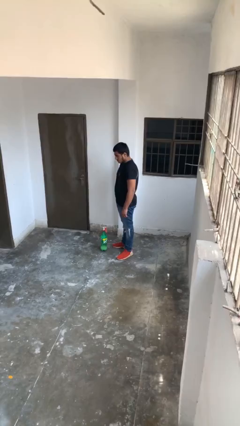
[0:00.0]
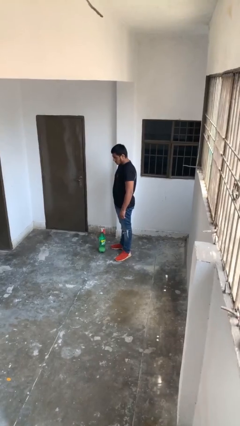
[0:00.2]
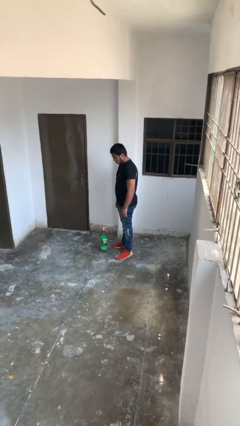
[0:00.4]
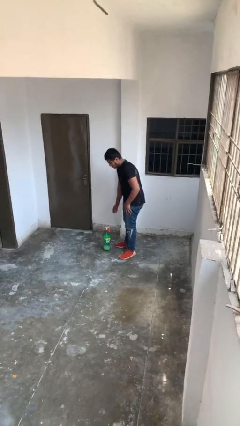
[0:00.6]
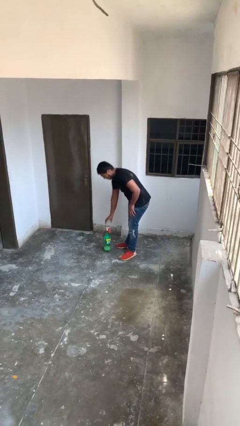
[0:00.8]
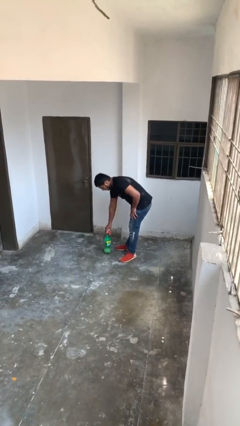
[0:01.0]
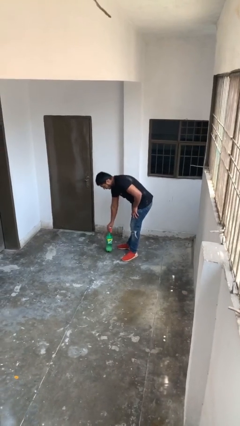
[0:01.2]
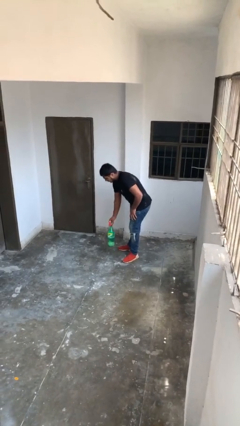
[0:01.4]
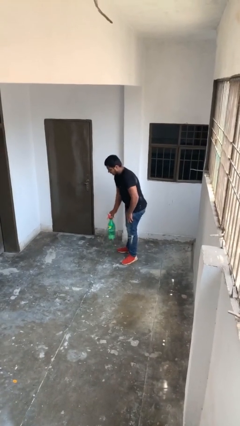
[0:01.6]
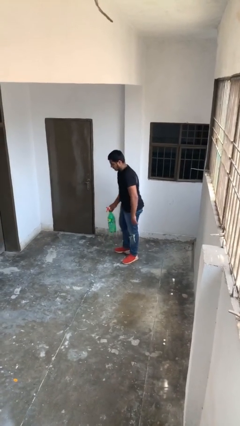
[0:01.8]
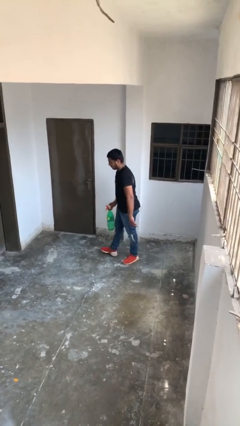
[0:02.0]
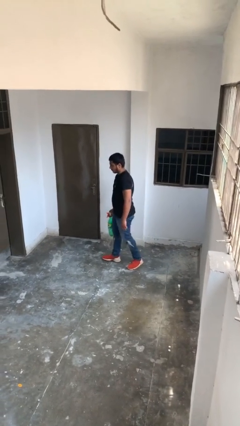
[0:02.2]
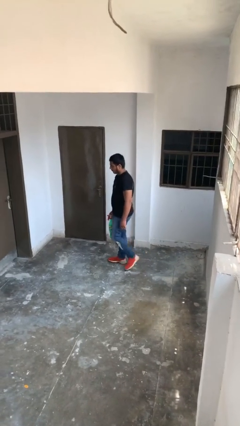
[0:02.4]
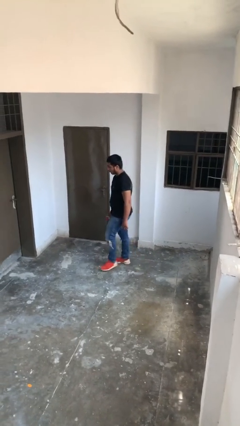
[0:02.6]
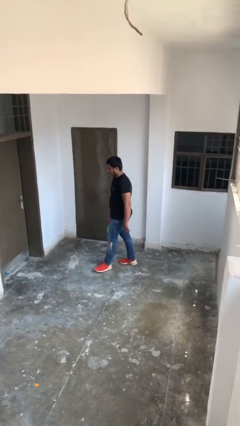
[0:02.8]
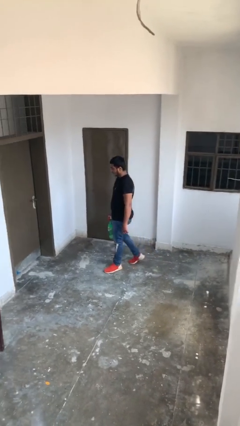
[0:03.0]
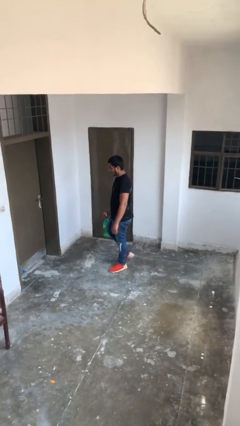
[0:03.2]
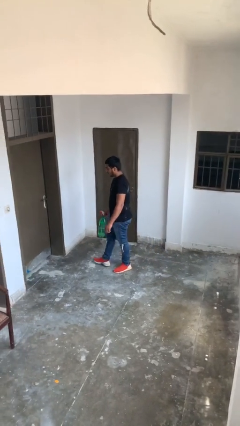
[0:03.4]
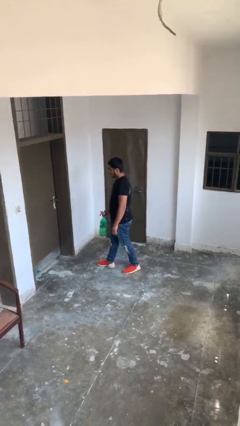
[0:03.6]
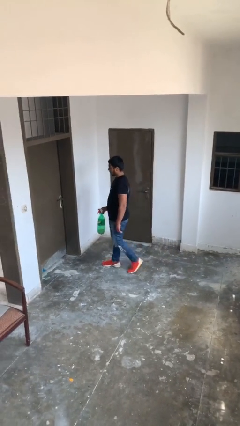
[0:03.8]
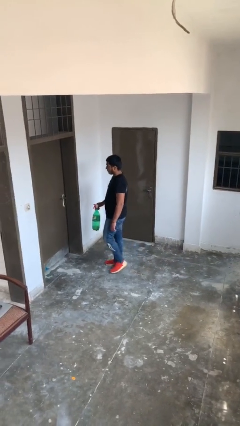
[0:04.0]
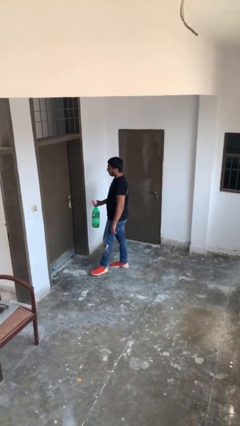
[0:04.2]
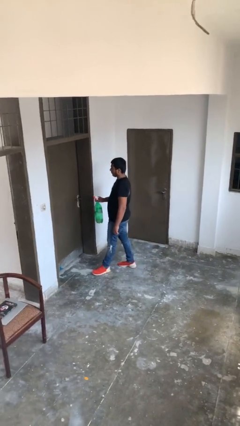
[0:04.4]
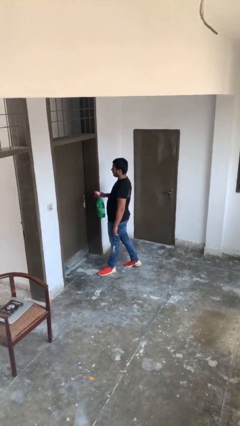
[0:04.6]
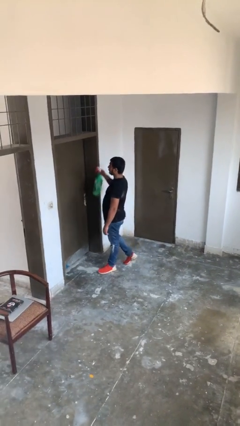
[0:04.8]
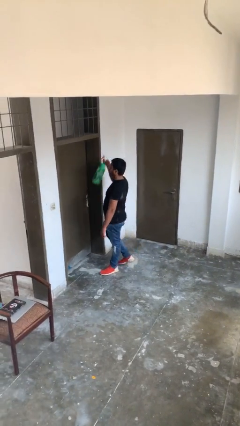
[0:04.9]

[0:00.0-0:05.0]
person picks up object from floor

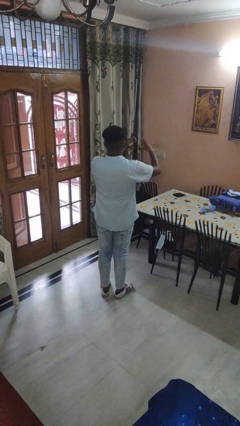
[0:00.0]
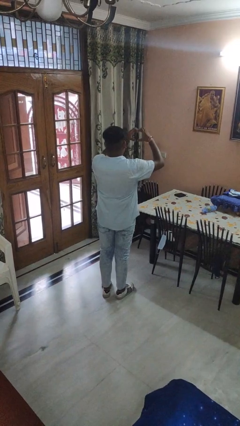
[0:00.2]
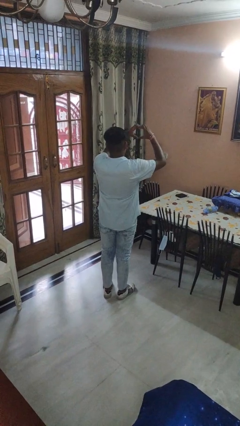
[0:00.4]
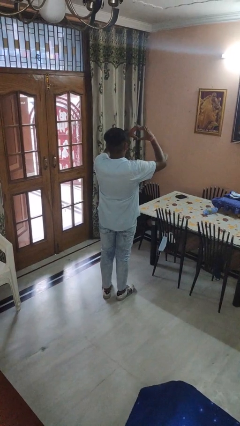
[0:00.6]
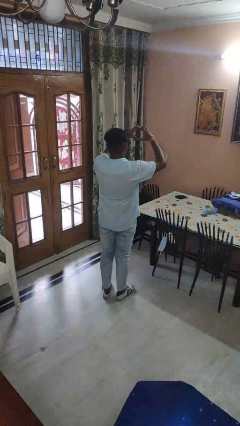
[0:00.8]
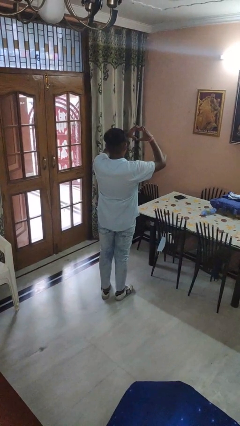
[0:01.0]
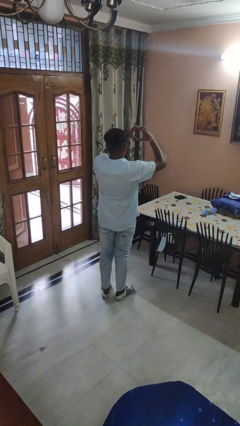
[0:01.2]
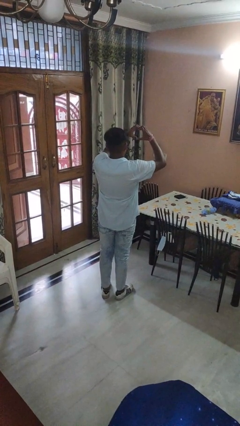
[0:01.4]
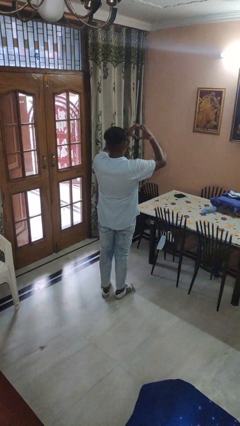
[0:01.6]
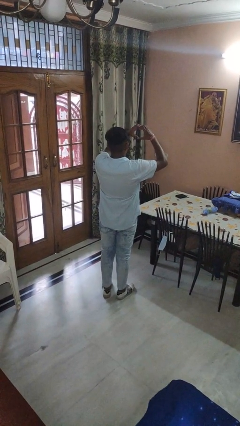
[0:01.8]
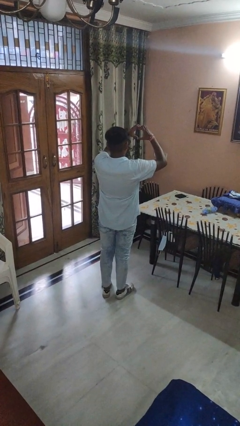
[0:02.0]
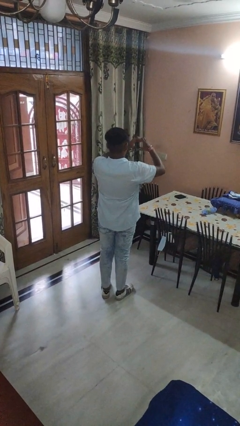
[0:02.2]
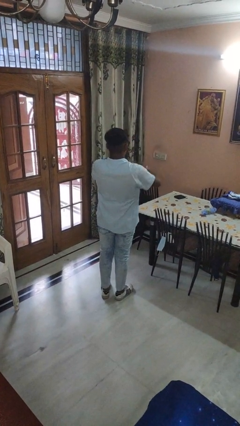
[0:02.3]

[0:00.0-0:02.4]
person gestures heart

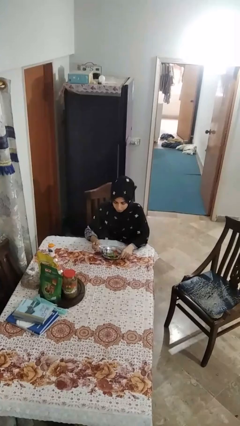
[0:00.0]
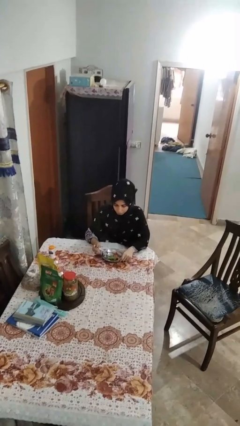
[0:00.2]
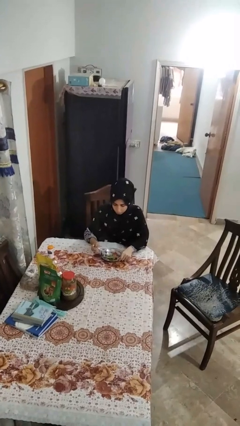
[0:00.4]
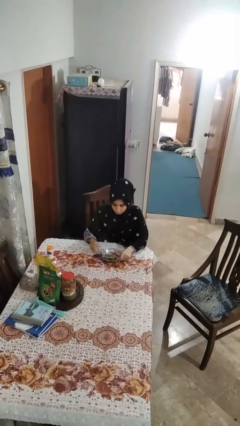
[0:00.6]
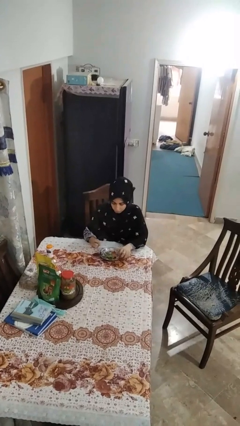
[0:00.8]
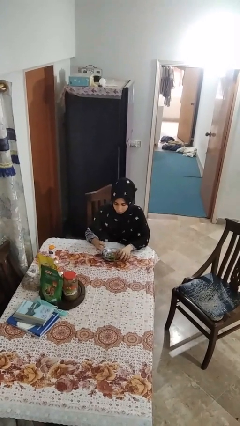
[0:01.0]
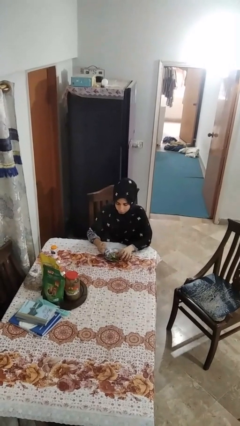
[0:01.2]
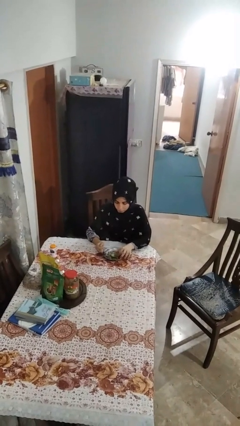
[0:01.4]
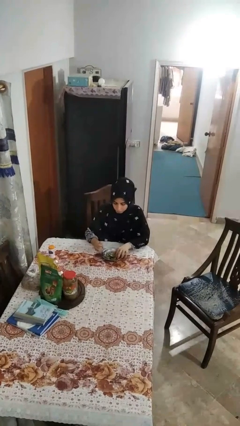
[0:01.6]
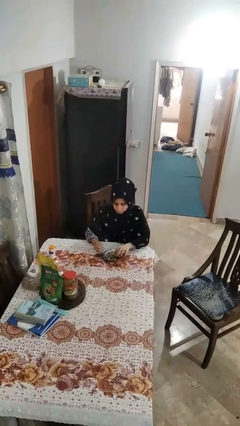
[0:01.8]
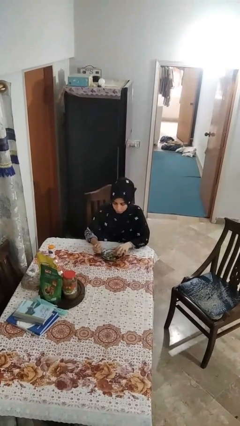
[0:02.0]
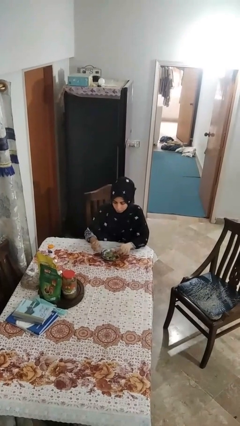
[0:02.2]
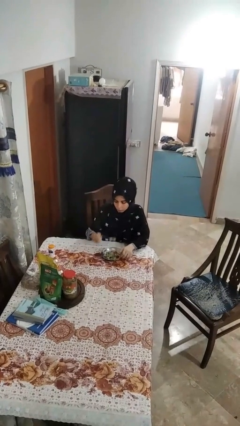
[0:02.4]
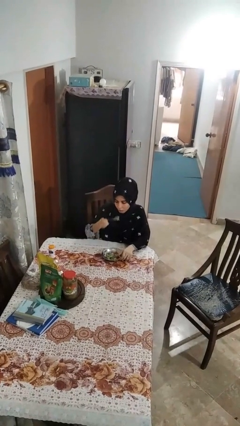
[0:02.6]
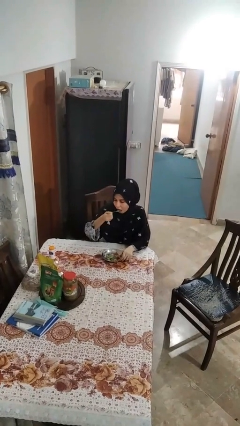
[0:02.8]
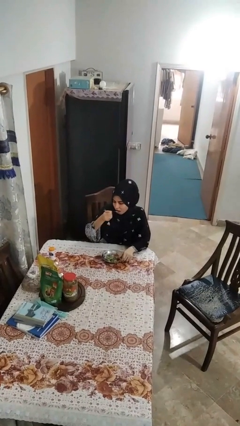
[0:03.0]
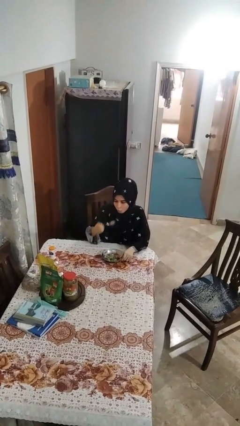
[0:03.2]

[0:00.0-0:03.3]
person eats with utensil

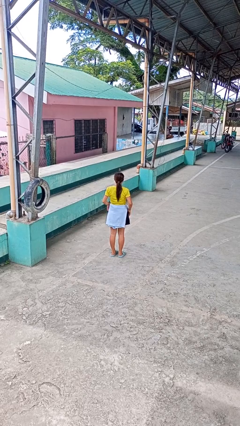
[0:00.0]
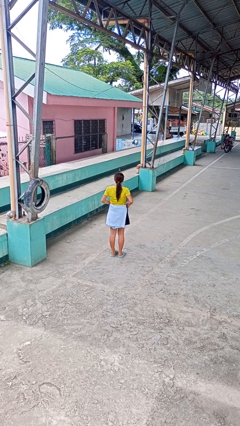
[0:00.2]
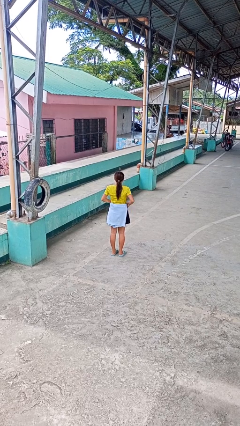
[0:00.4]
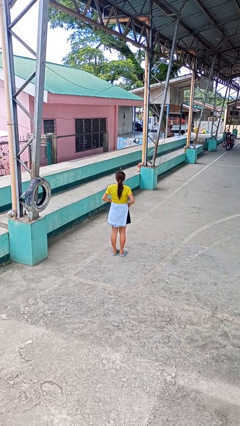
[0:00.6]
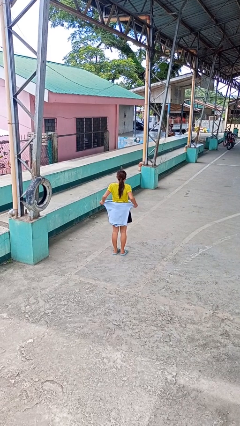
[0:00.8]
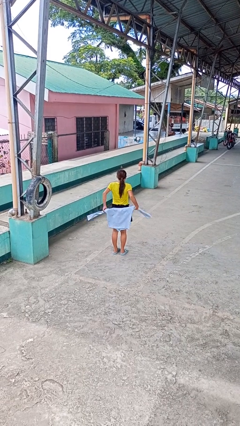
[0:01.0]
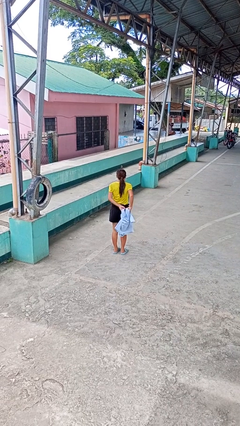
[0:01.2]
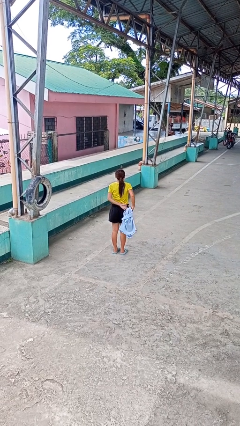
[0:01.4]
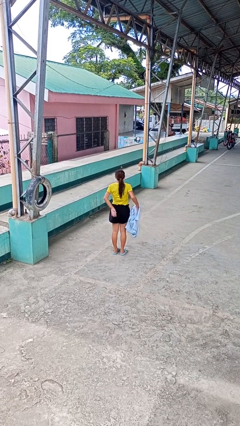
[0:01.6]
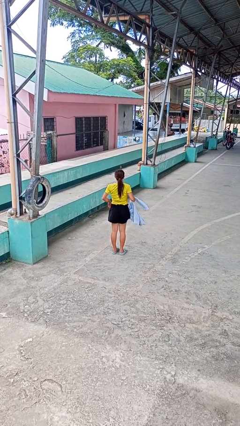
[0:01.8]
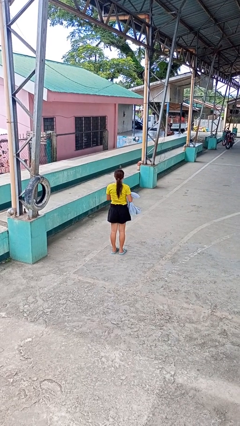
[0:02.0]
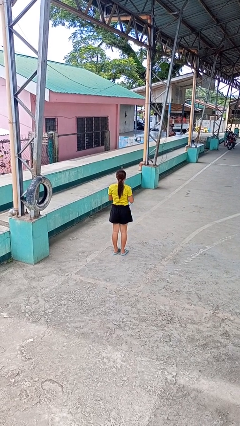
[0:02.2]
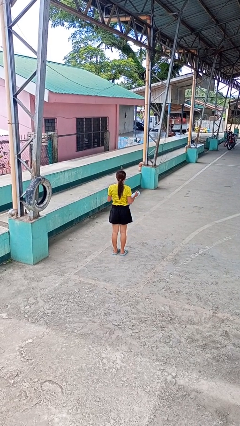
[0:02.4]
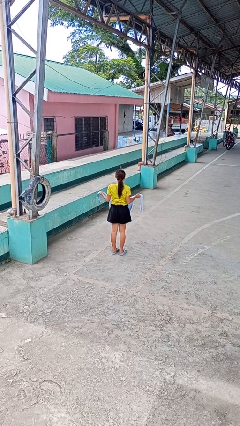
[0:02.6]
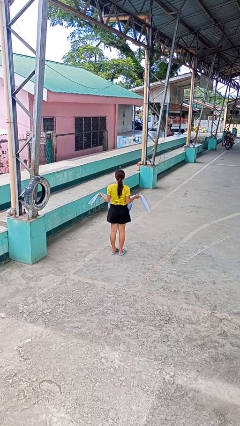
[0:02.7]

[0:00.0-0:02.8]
person unties jacket around waist

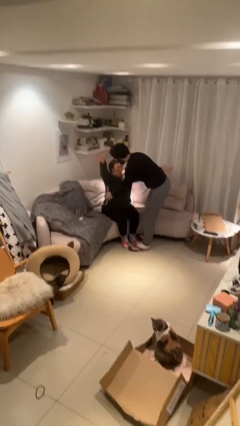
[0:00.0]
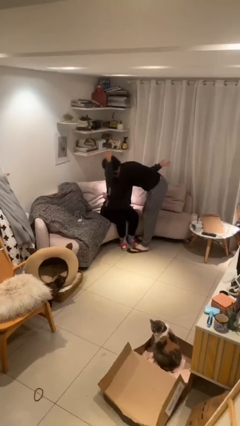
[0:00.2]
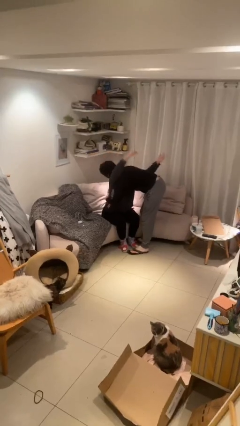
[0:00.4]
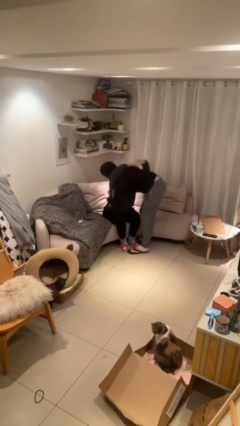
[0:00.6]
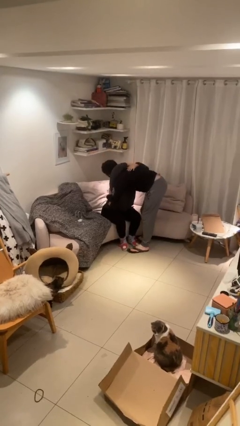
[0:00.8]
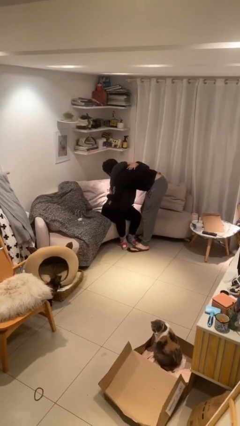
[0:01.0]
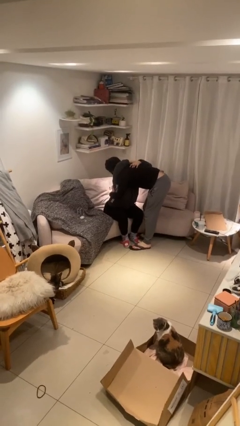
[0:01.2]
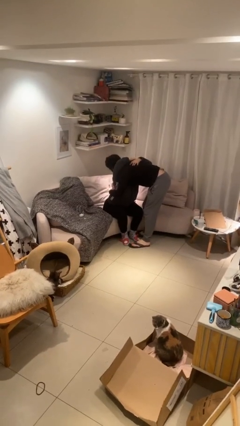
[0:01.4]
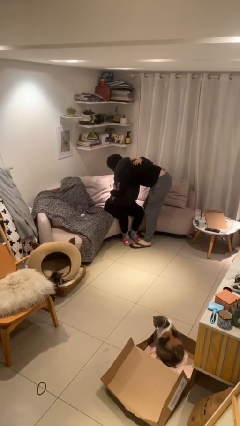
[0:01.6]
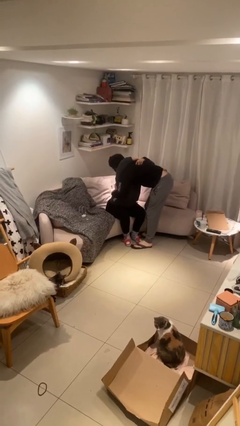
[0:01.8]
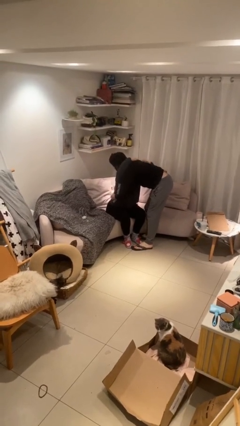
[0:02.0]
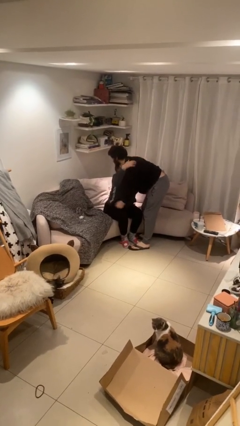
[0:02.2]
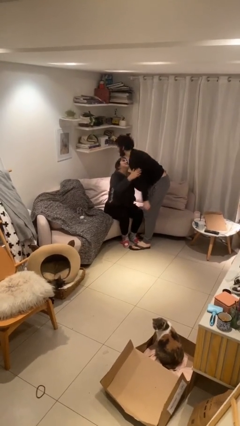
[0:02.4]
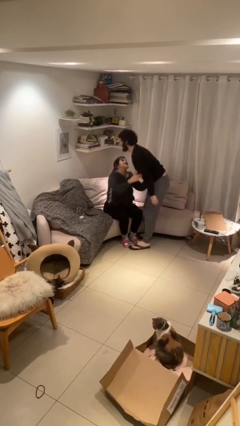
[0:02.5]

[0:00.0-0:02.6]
person embraces person

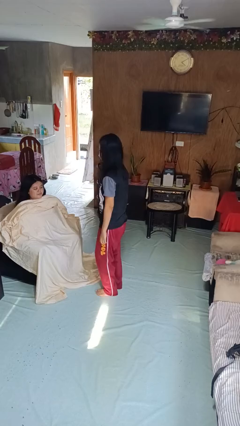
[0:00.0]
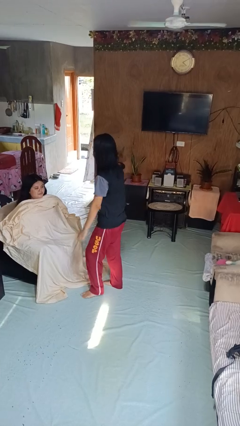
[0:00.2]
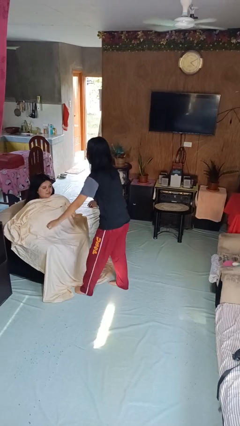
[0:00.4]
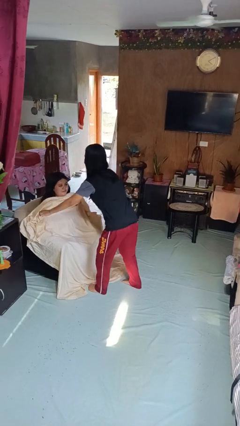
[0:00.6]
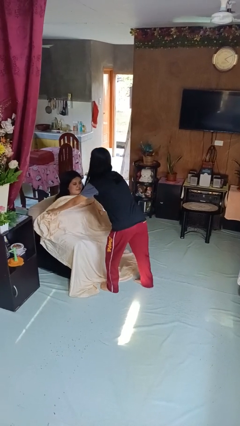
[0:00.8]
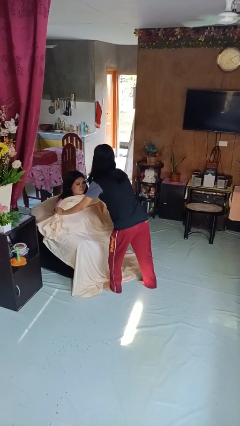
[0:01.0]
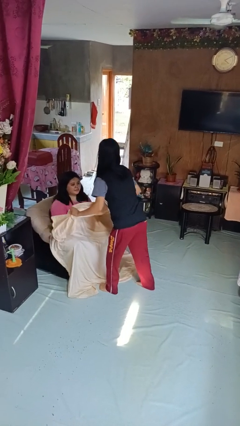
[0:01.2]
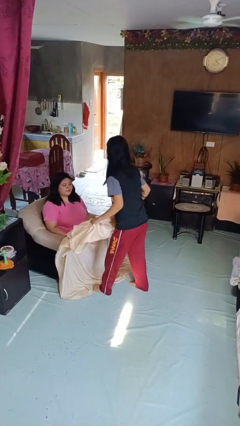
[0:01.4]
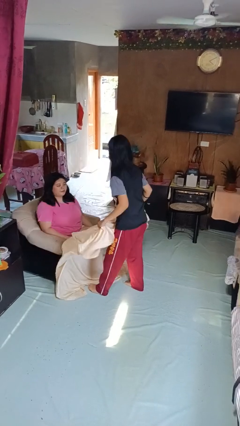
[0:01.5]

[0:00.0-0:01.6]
person uncovers friend with blanket
